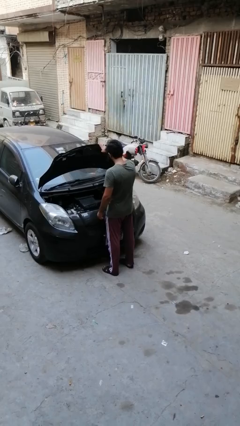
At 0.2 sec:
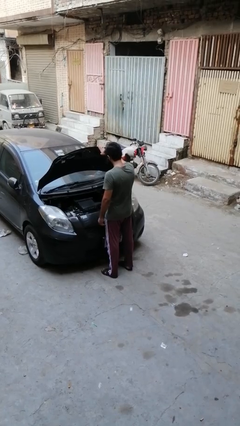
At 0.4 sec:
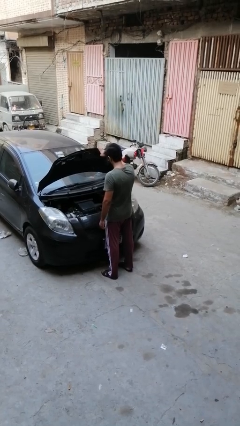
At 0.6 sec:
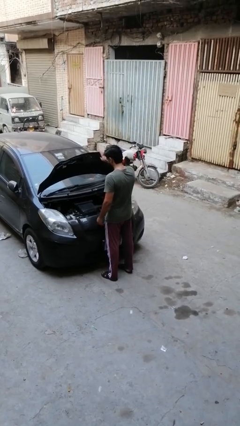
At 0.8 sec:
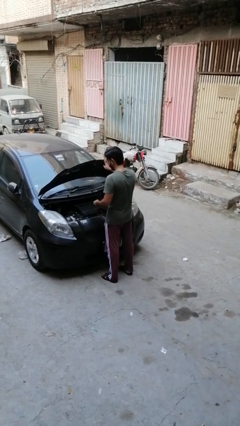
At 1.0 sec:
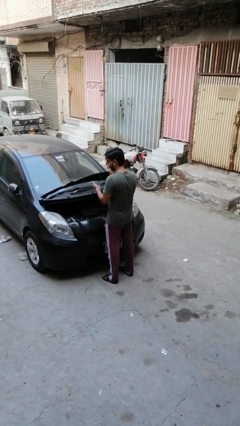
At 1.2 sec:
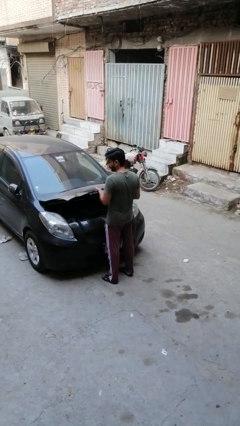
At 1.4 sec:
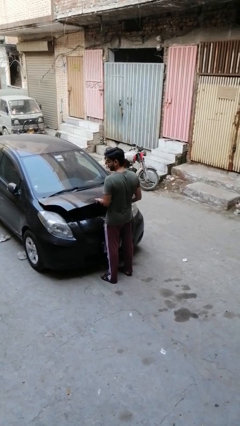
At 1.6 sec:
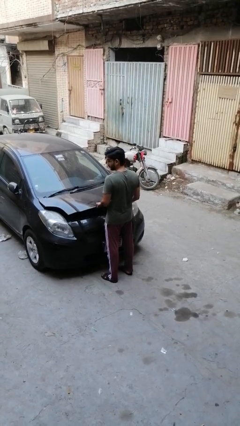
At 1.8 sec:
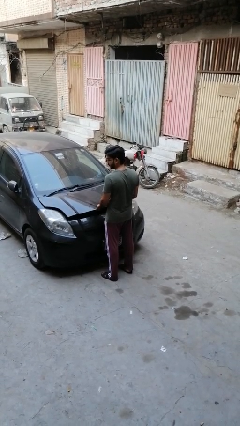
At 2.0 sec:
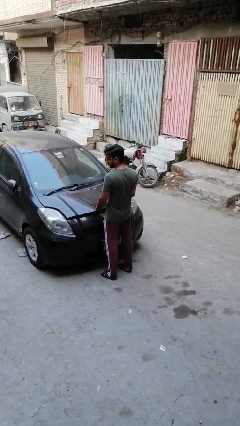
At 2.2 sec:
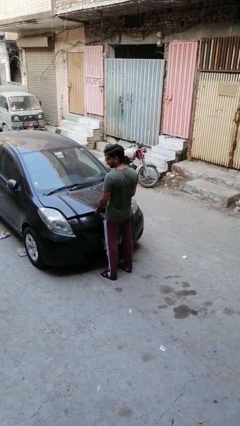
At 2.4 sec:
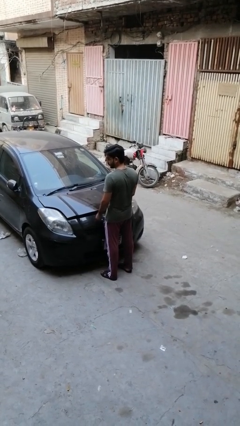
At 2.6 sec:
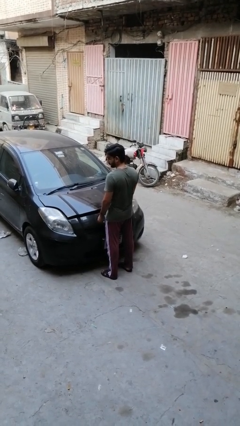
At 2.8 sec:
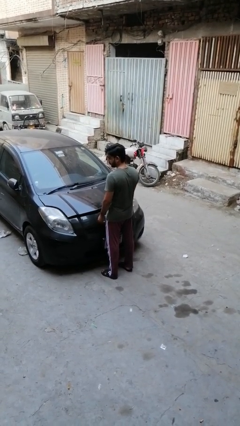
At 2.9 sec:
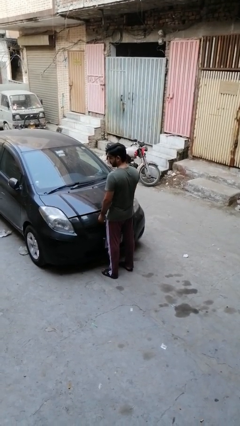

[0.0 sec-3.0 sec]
person closes car hood

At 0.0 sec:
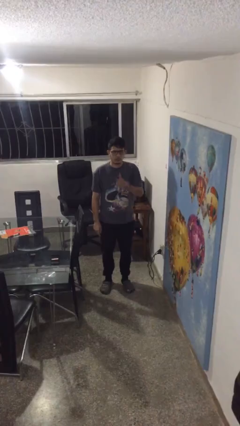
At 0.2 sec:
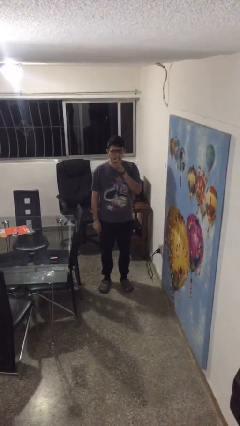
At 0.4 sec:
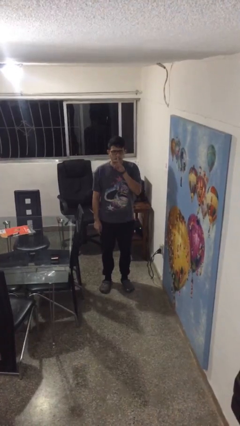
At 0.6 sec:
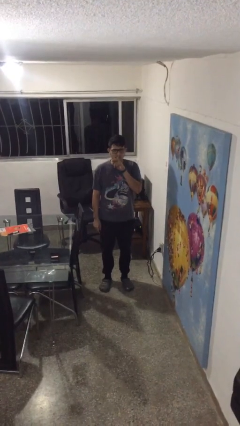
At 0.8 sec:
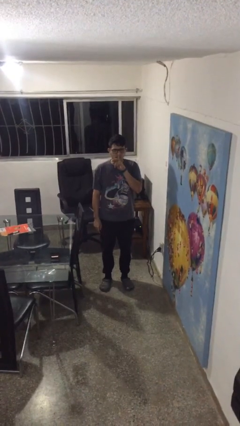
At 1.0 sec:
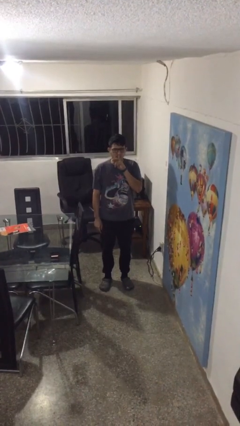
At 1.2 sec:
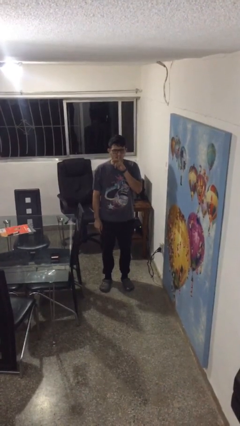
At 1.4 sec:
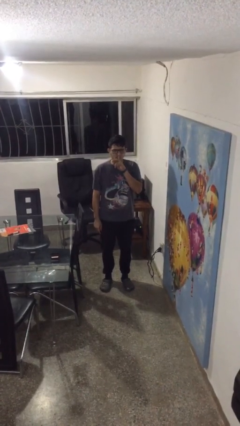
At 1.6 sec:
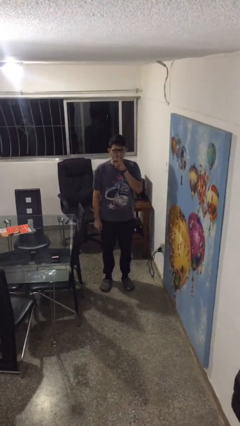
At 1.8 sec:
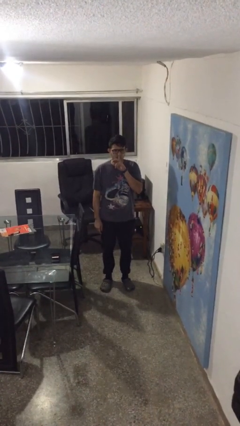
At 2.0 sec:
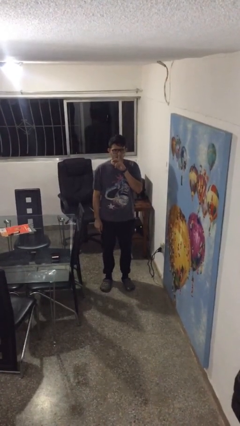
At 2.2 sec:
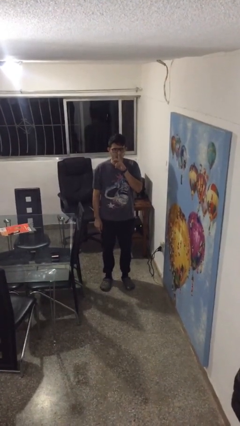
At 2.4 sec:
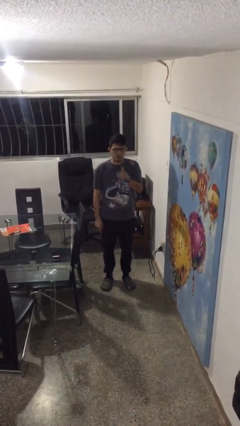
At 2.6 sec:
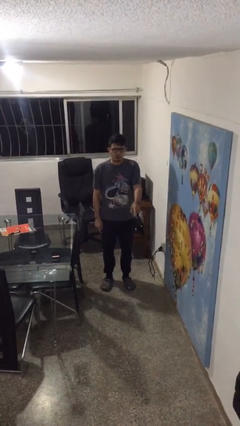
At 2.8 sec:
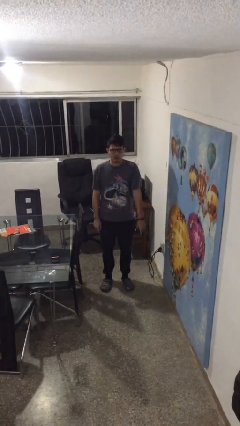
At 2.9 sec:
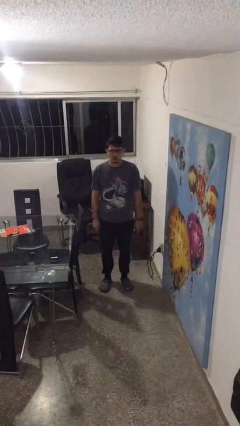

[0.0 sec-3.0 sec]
person gestures be quiet

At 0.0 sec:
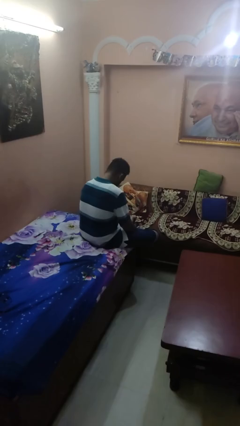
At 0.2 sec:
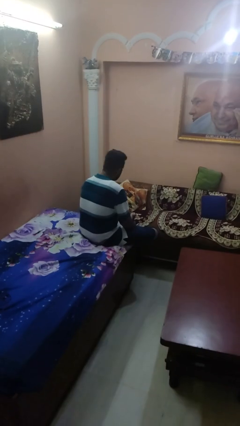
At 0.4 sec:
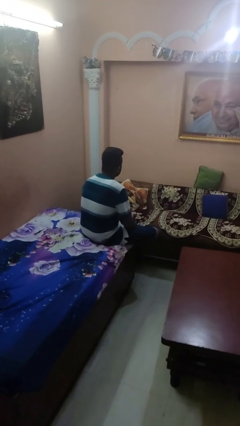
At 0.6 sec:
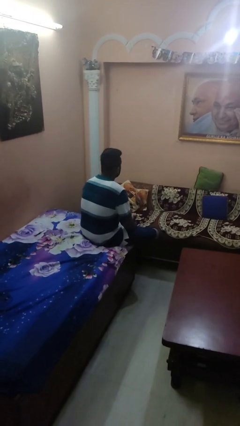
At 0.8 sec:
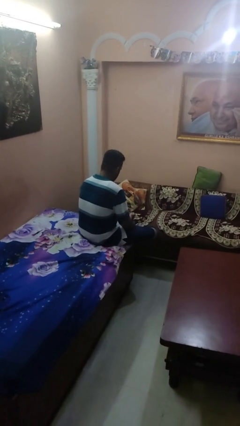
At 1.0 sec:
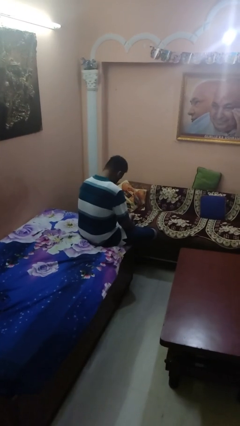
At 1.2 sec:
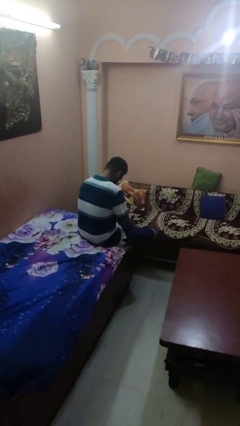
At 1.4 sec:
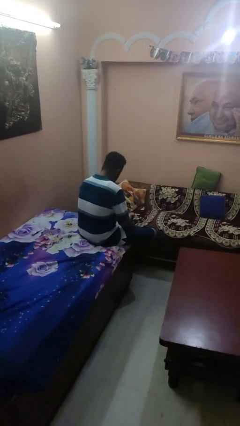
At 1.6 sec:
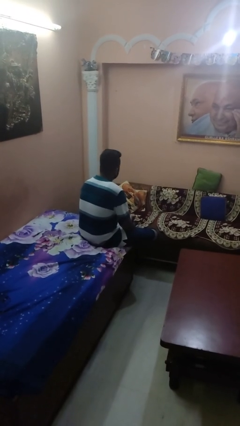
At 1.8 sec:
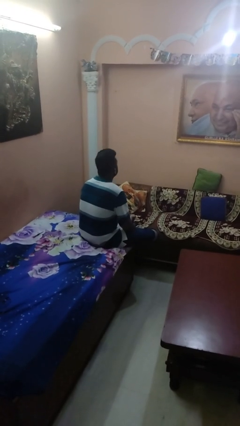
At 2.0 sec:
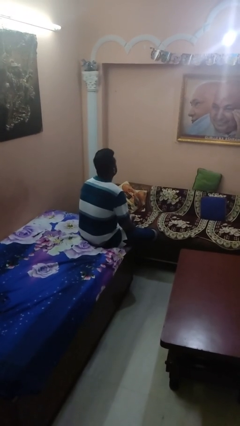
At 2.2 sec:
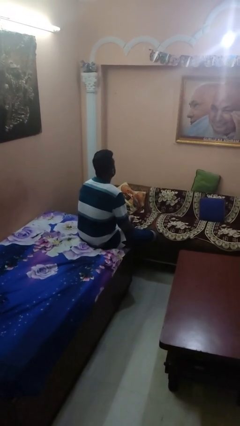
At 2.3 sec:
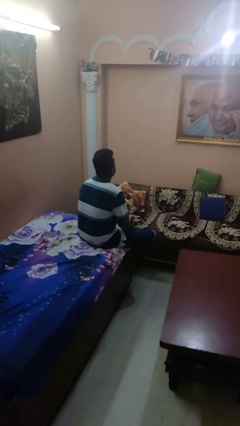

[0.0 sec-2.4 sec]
person nods head

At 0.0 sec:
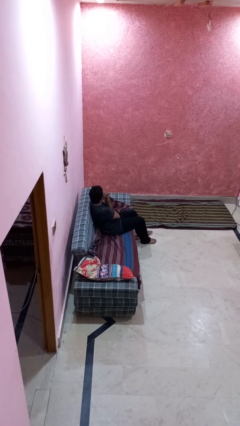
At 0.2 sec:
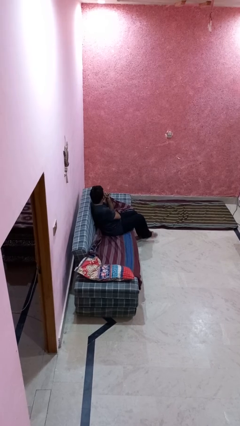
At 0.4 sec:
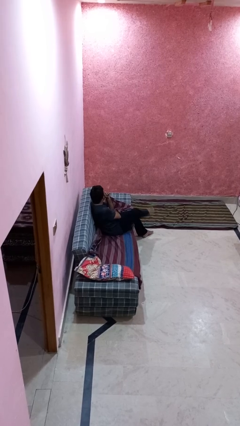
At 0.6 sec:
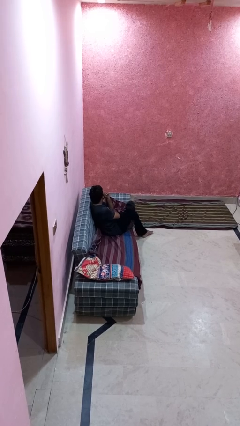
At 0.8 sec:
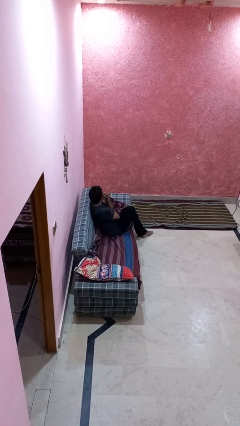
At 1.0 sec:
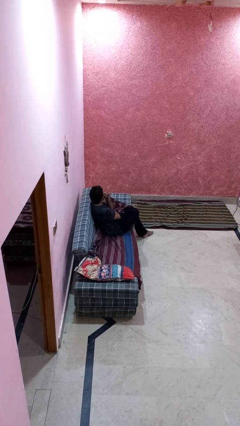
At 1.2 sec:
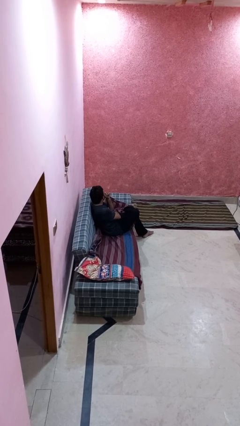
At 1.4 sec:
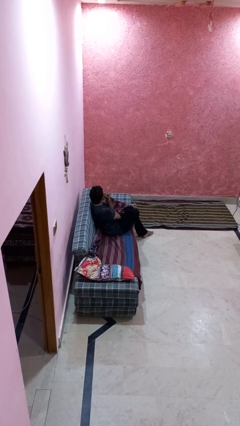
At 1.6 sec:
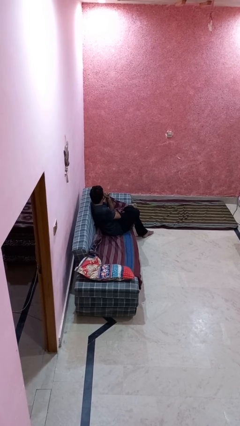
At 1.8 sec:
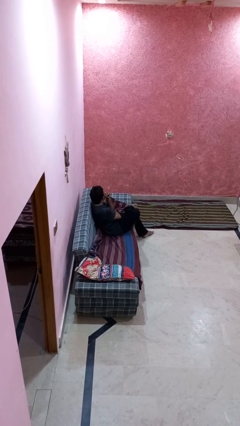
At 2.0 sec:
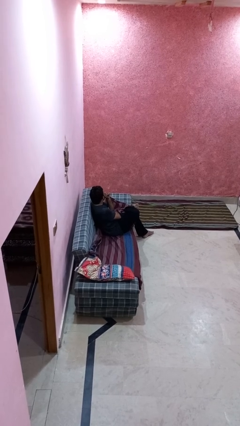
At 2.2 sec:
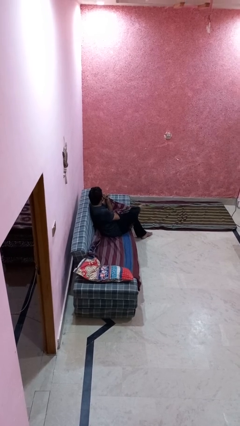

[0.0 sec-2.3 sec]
person crosses legs

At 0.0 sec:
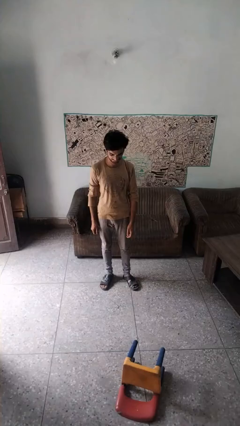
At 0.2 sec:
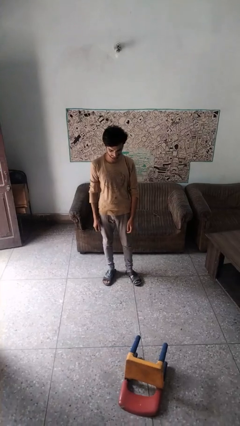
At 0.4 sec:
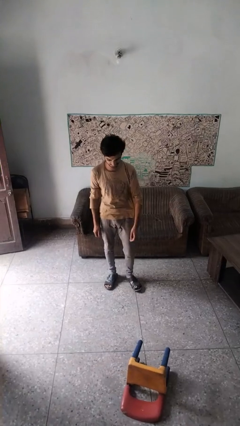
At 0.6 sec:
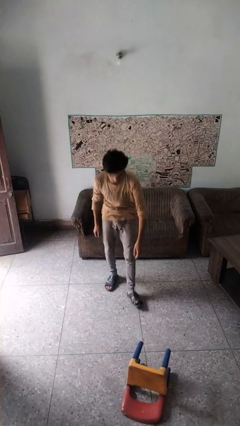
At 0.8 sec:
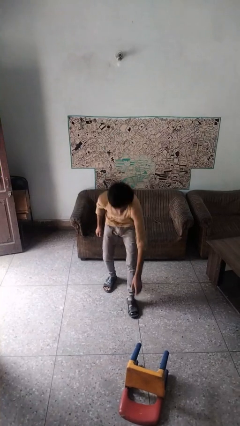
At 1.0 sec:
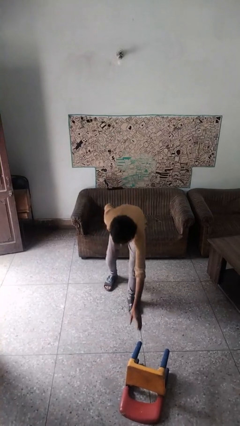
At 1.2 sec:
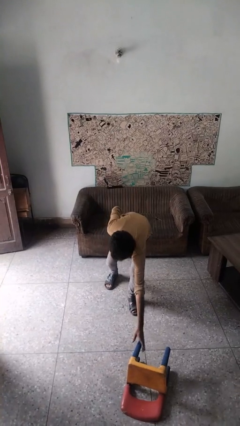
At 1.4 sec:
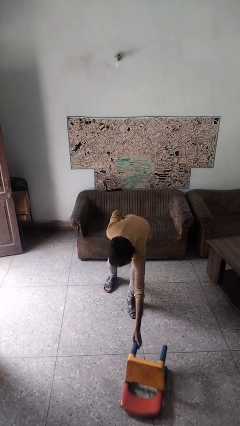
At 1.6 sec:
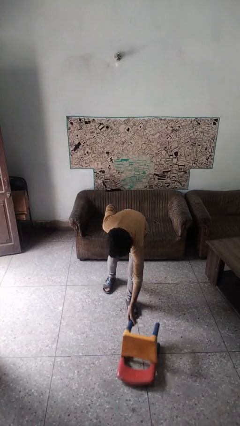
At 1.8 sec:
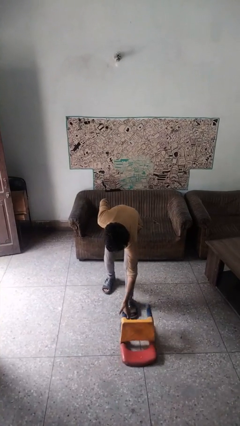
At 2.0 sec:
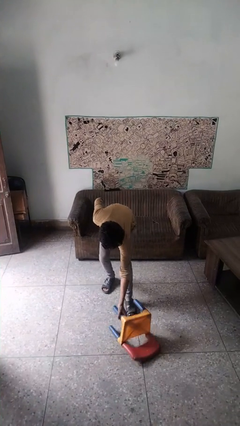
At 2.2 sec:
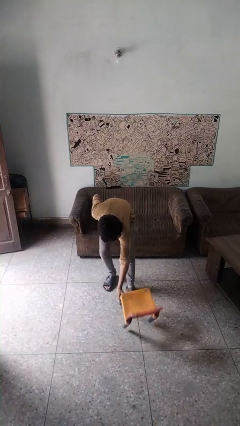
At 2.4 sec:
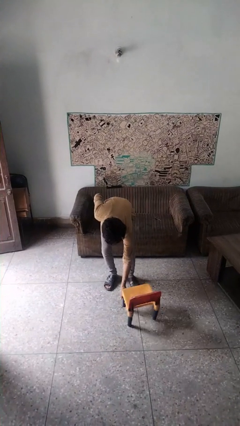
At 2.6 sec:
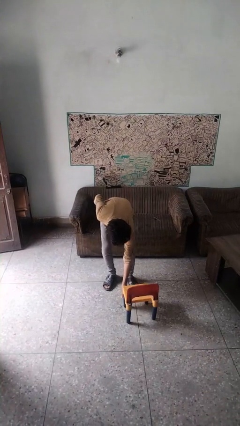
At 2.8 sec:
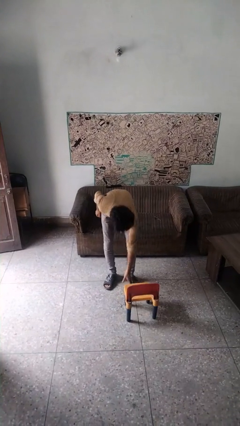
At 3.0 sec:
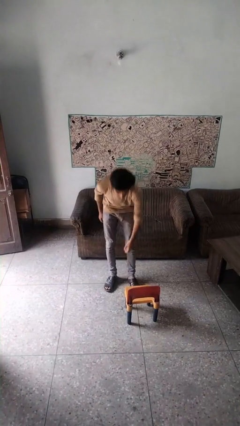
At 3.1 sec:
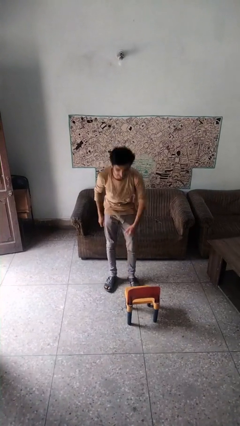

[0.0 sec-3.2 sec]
person sets upright furniture

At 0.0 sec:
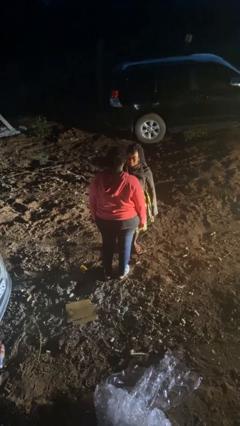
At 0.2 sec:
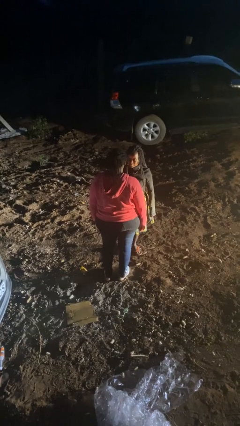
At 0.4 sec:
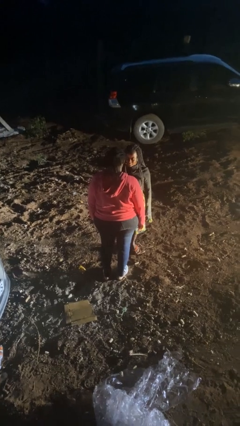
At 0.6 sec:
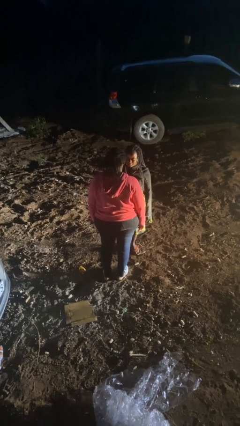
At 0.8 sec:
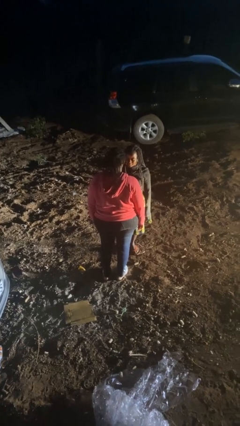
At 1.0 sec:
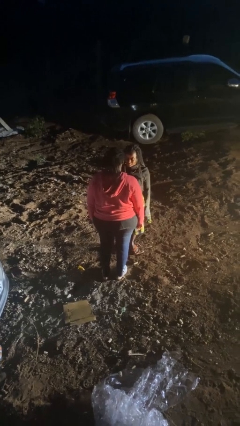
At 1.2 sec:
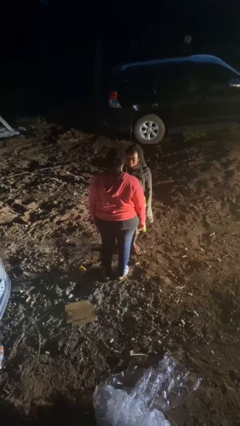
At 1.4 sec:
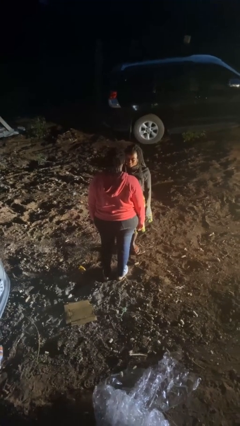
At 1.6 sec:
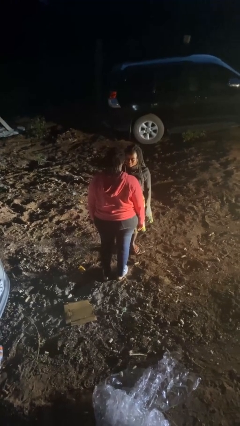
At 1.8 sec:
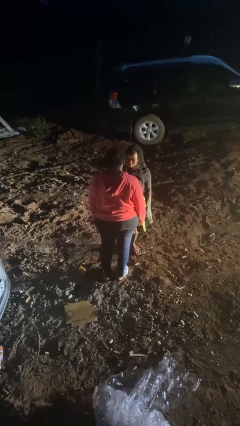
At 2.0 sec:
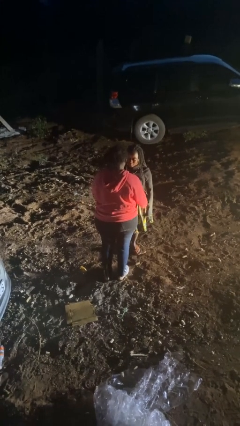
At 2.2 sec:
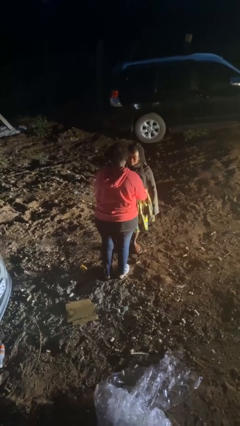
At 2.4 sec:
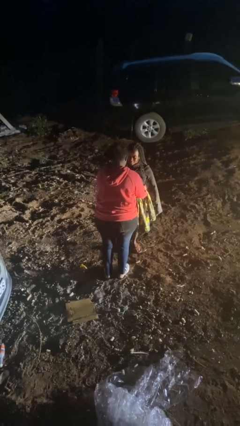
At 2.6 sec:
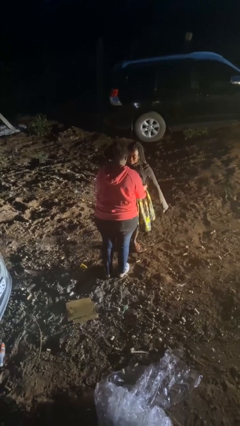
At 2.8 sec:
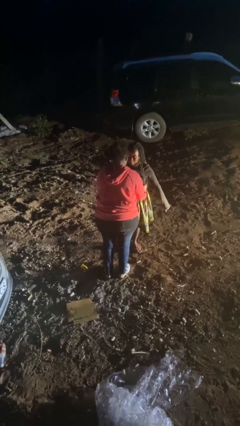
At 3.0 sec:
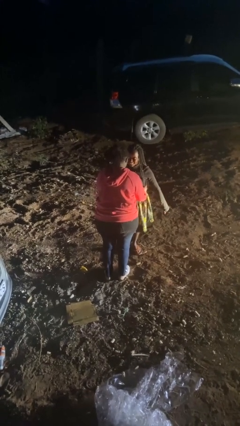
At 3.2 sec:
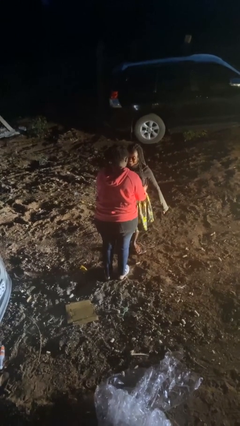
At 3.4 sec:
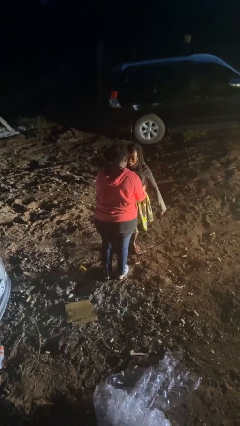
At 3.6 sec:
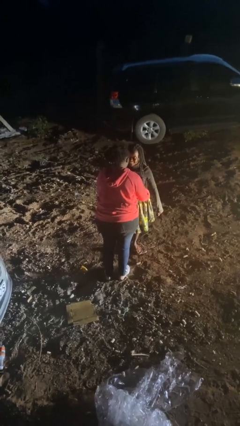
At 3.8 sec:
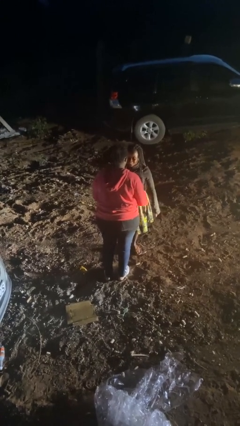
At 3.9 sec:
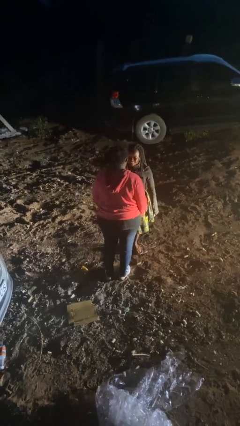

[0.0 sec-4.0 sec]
person tickles person
